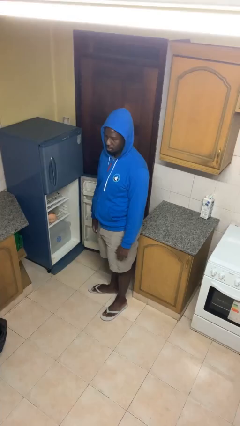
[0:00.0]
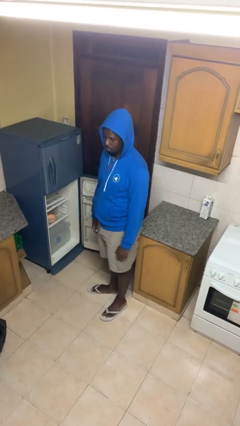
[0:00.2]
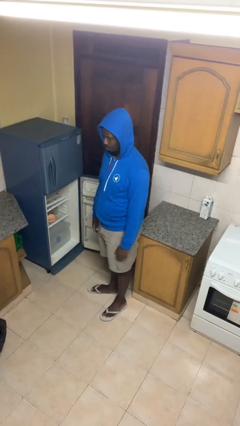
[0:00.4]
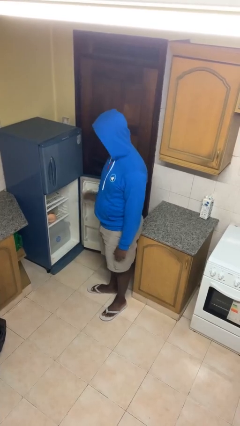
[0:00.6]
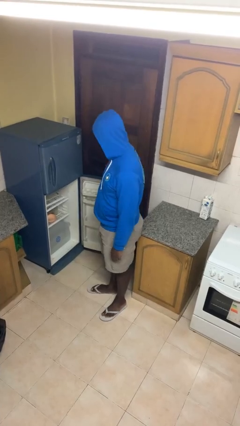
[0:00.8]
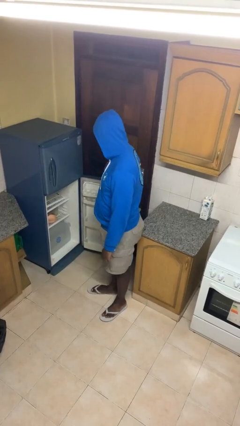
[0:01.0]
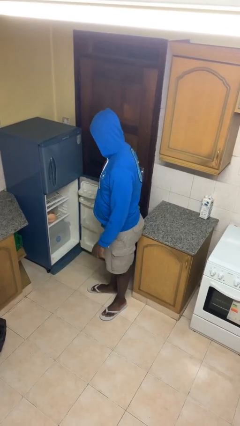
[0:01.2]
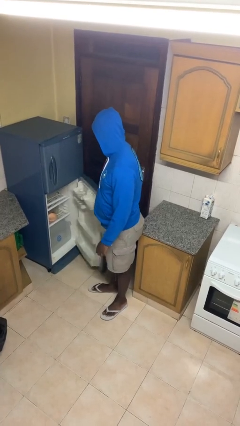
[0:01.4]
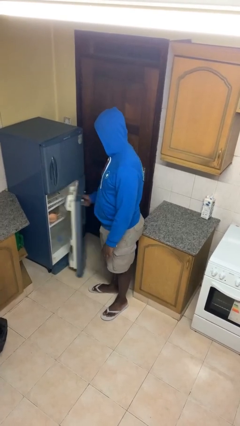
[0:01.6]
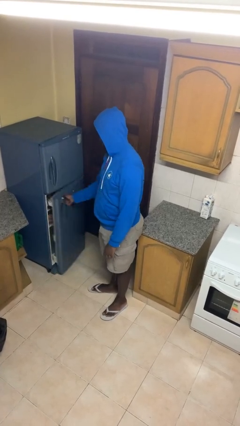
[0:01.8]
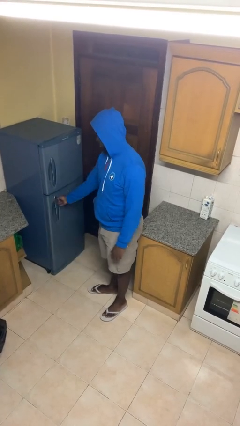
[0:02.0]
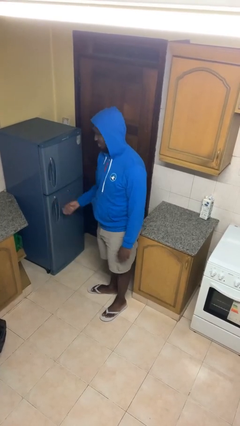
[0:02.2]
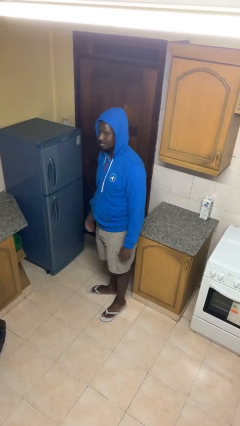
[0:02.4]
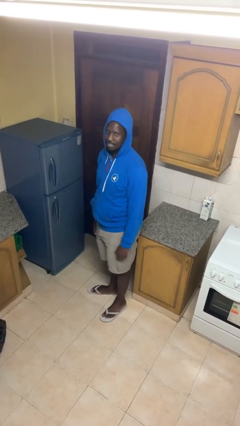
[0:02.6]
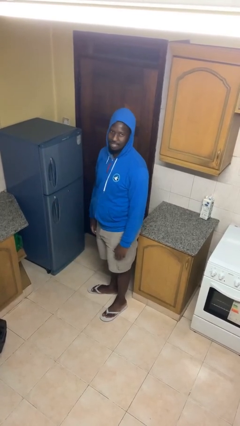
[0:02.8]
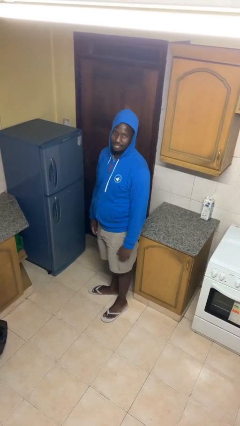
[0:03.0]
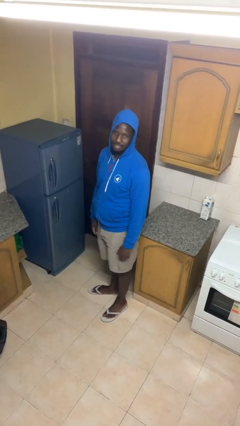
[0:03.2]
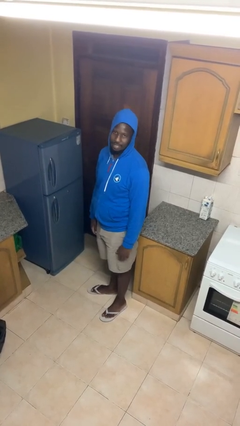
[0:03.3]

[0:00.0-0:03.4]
person closes refrigerator

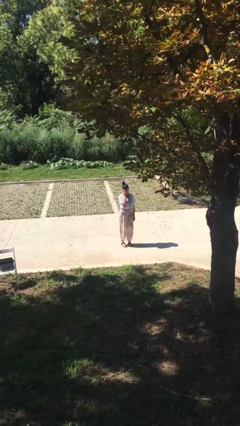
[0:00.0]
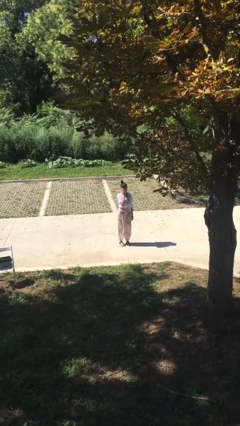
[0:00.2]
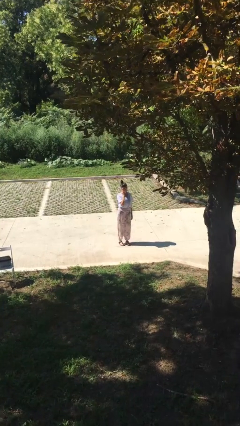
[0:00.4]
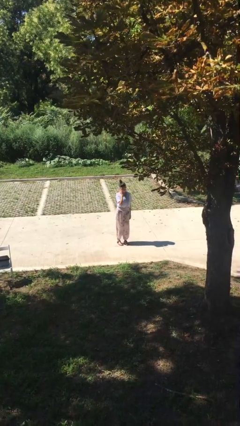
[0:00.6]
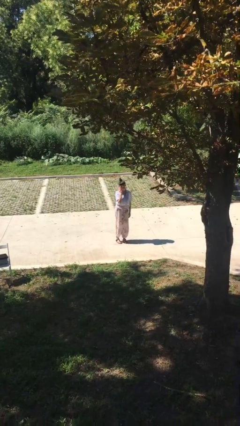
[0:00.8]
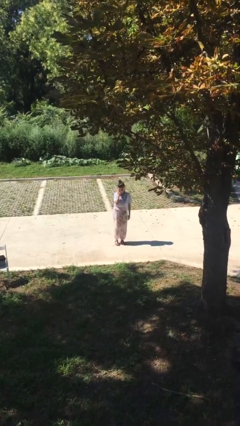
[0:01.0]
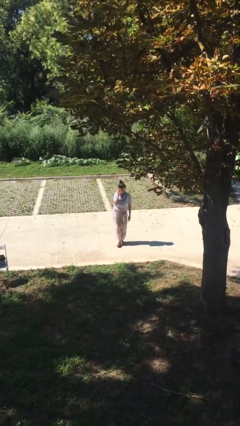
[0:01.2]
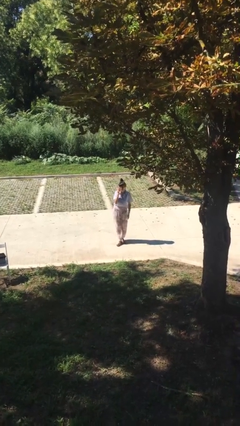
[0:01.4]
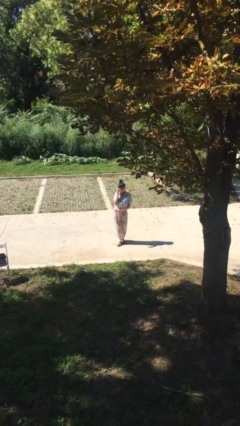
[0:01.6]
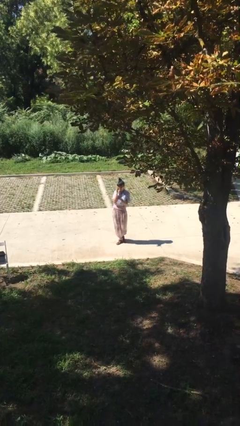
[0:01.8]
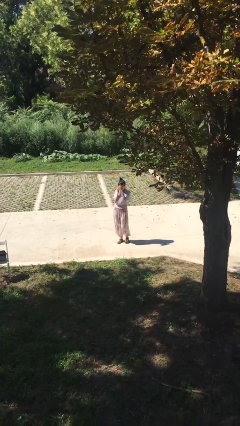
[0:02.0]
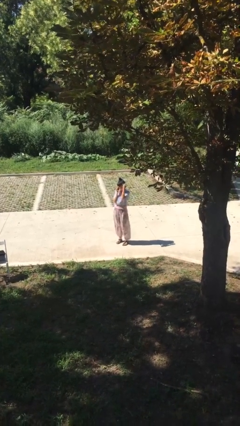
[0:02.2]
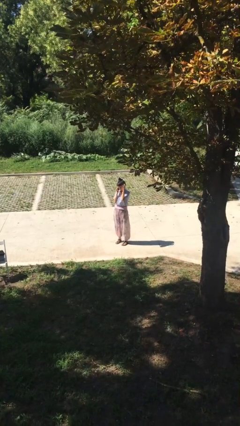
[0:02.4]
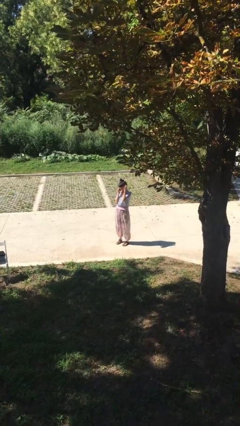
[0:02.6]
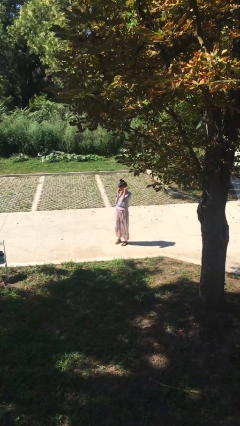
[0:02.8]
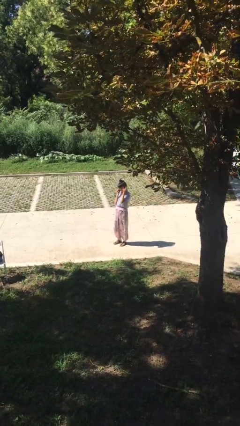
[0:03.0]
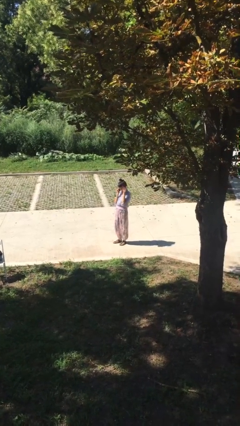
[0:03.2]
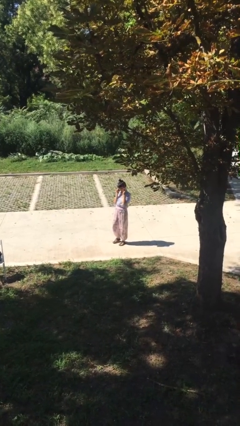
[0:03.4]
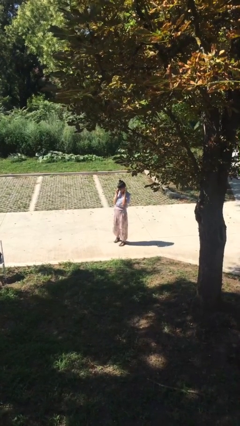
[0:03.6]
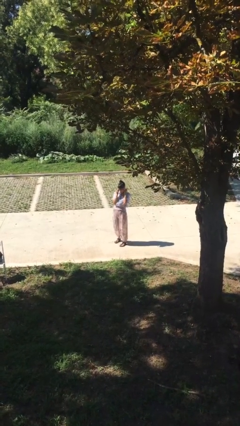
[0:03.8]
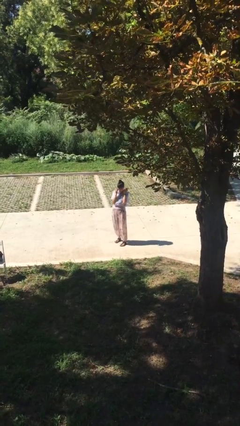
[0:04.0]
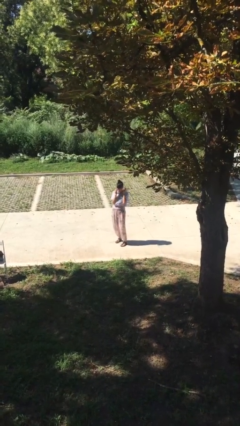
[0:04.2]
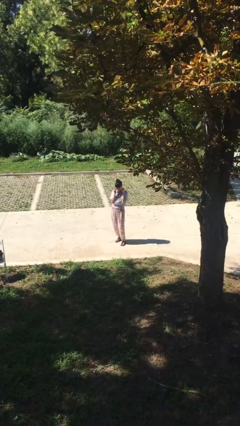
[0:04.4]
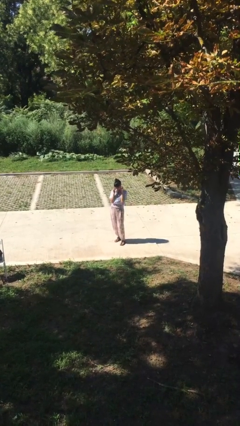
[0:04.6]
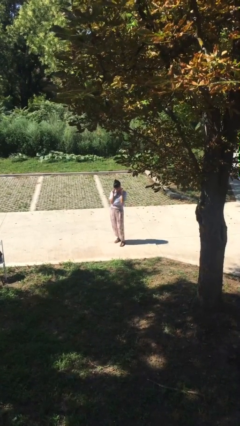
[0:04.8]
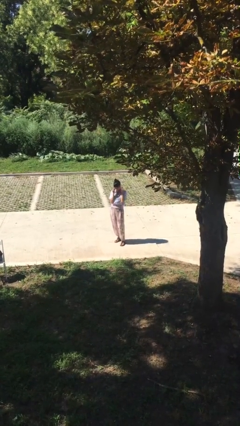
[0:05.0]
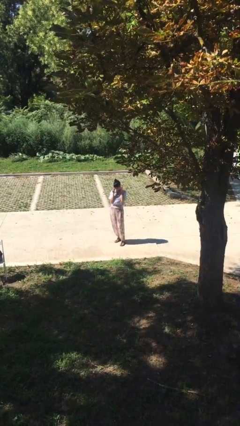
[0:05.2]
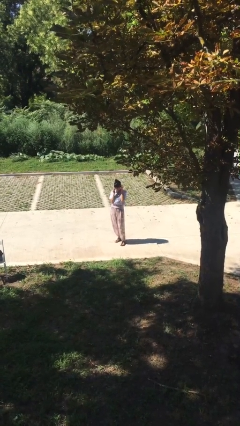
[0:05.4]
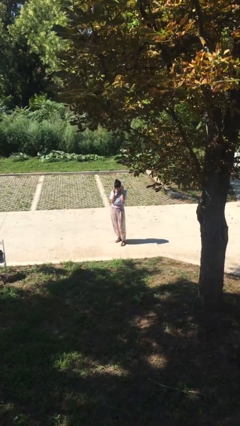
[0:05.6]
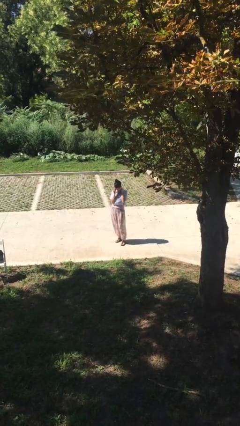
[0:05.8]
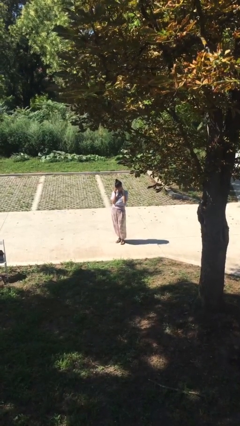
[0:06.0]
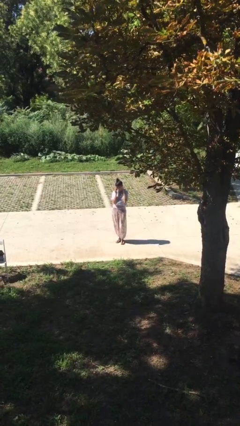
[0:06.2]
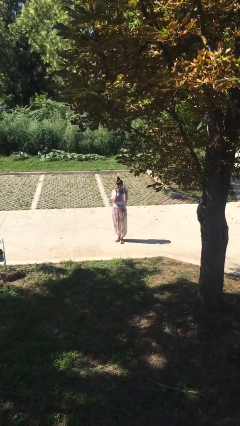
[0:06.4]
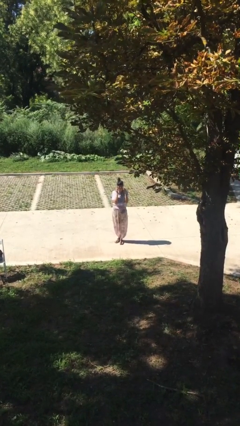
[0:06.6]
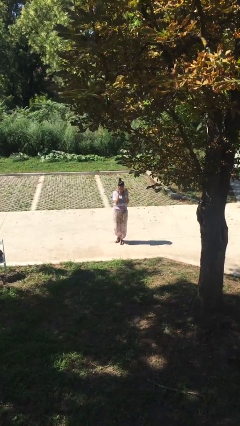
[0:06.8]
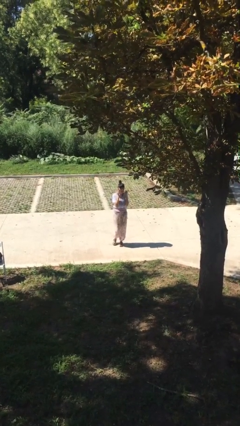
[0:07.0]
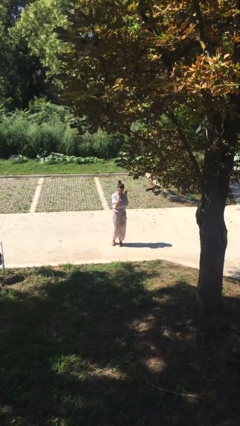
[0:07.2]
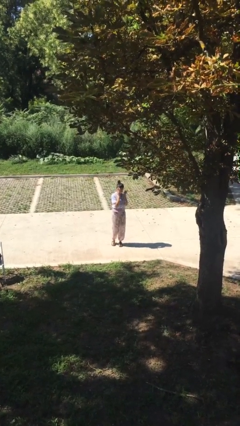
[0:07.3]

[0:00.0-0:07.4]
person talks on phone

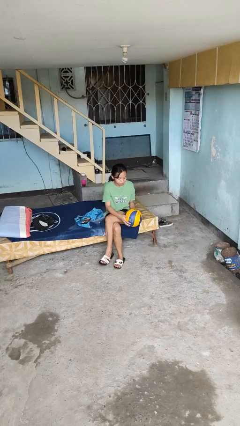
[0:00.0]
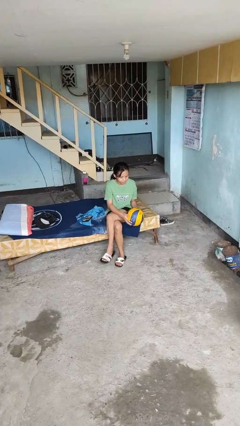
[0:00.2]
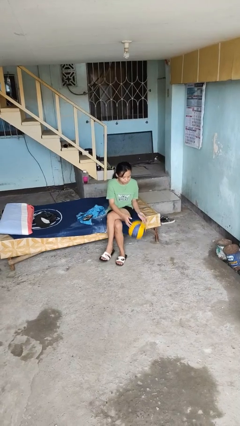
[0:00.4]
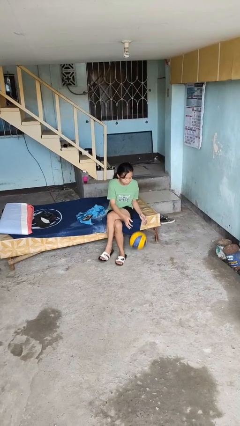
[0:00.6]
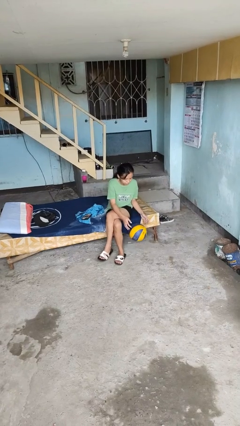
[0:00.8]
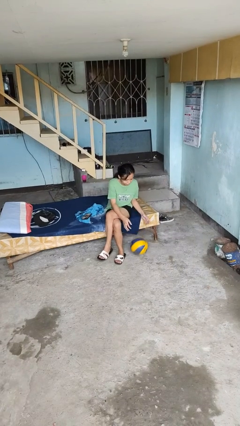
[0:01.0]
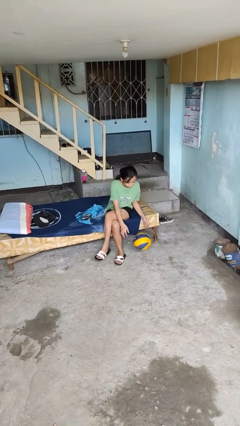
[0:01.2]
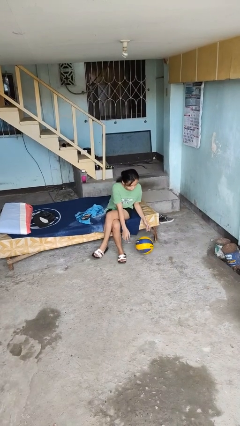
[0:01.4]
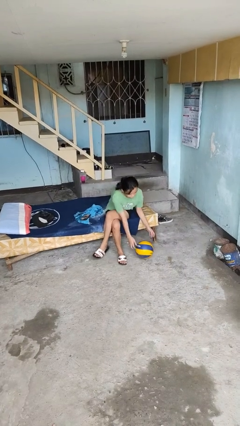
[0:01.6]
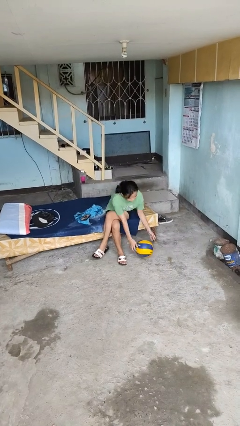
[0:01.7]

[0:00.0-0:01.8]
person drops object

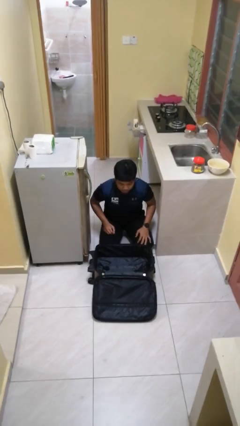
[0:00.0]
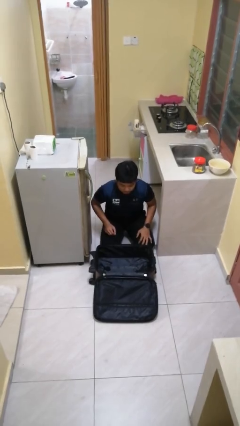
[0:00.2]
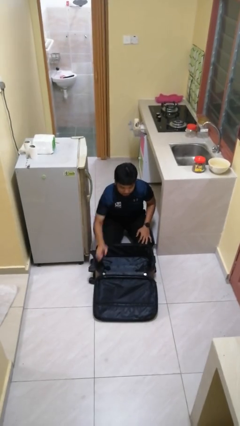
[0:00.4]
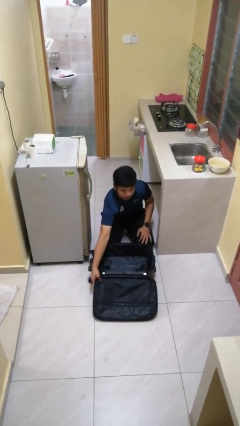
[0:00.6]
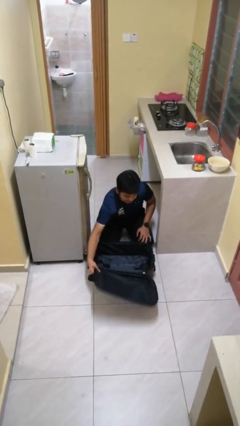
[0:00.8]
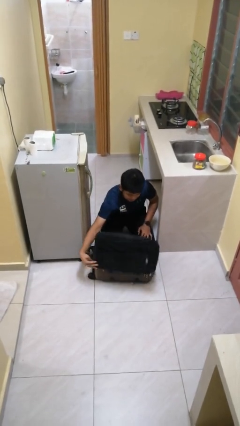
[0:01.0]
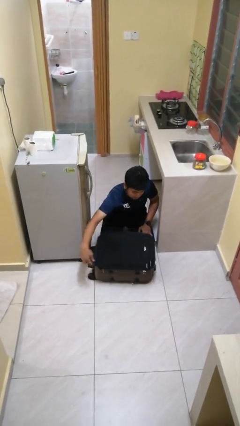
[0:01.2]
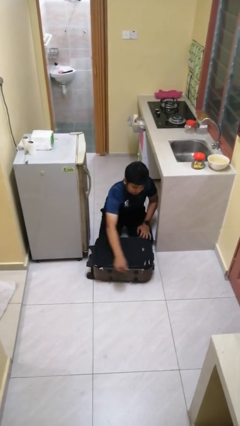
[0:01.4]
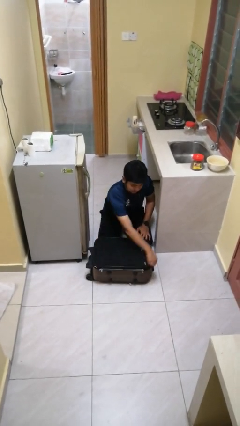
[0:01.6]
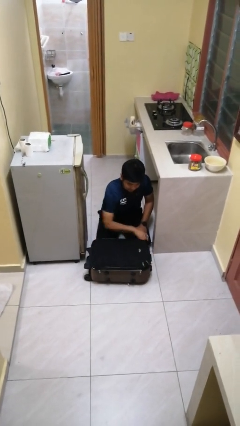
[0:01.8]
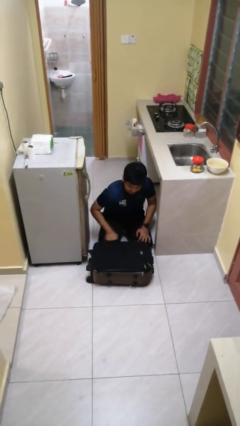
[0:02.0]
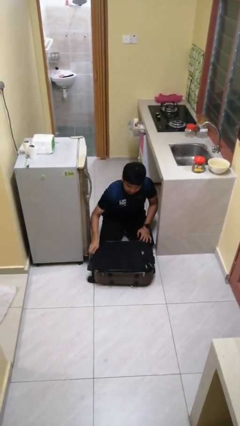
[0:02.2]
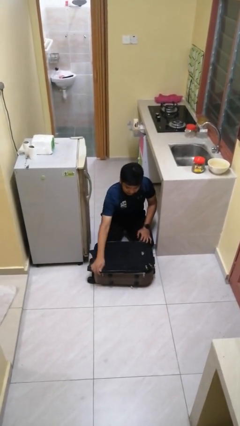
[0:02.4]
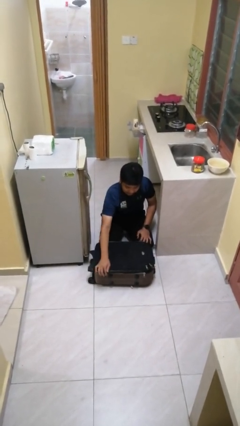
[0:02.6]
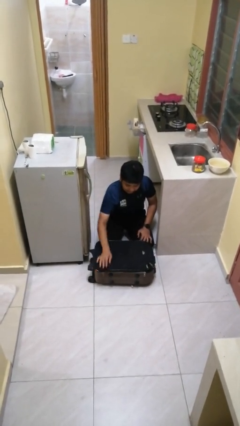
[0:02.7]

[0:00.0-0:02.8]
person closes suitcase

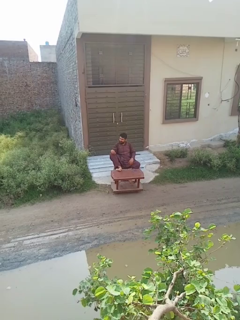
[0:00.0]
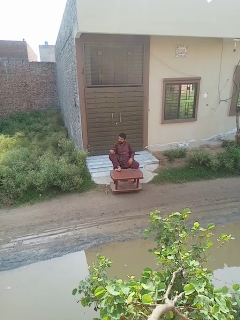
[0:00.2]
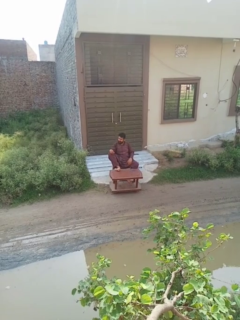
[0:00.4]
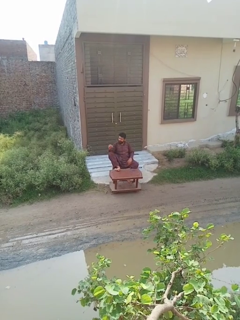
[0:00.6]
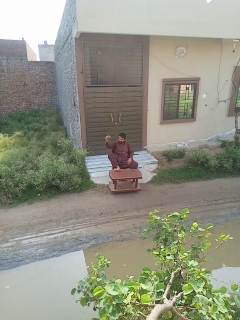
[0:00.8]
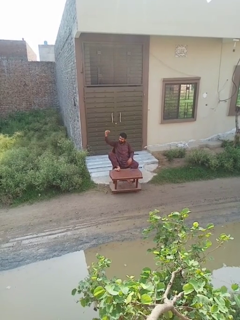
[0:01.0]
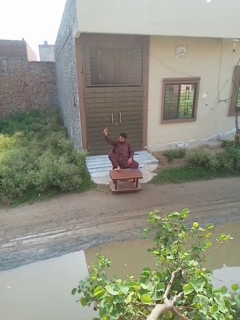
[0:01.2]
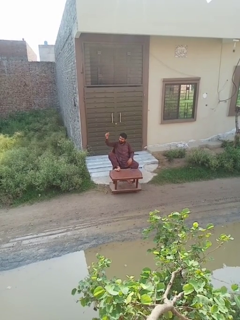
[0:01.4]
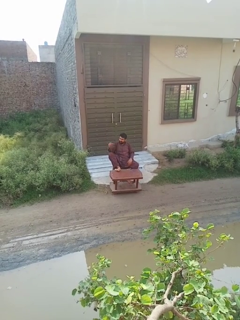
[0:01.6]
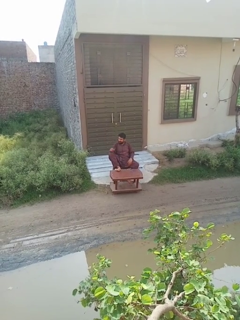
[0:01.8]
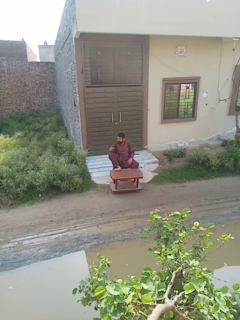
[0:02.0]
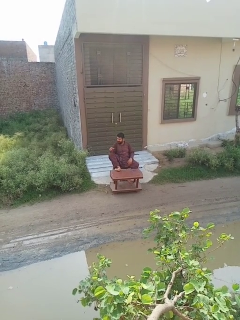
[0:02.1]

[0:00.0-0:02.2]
person snaps fingers
